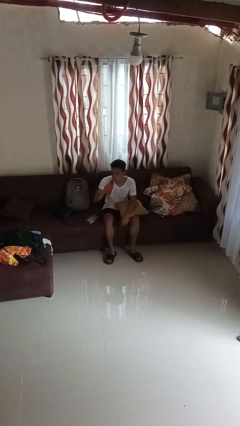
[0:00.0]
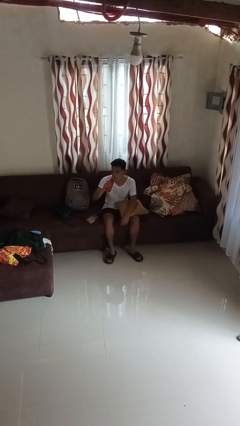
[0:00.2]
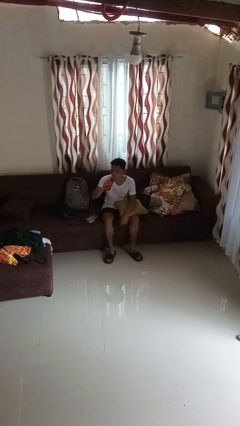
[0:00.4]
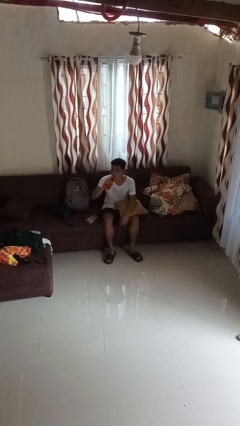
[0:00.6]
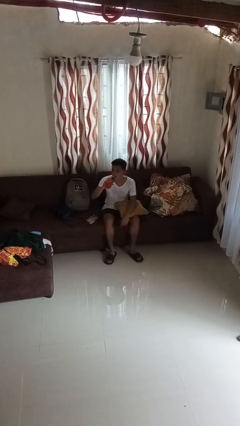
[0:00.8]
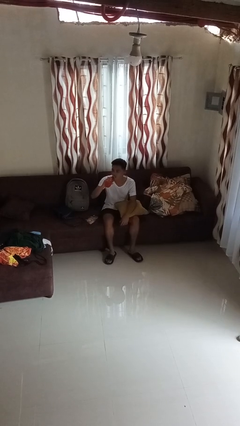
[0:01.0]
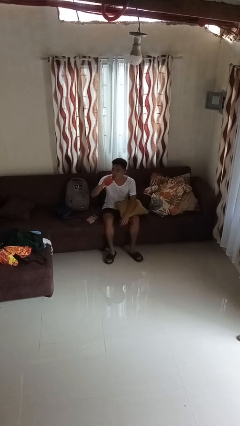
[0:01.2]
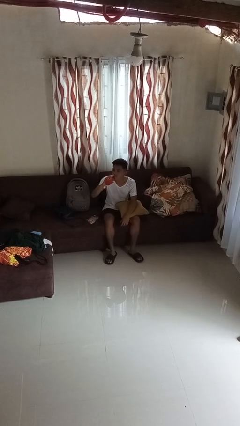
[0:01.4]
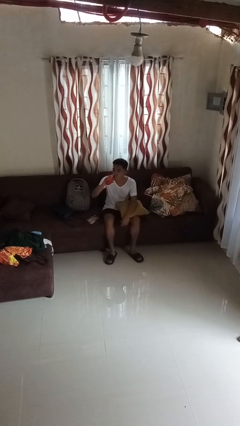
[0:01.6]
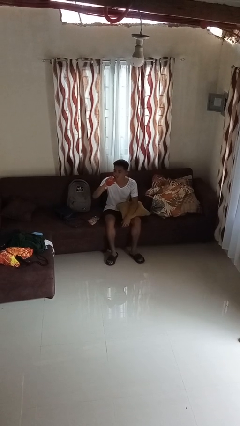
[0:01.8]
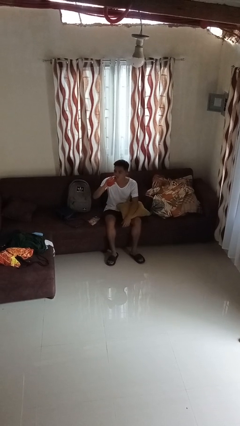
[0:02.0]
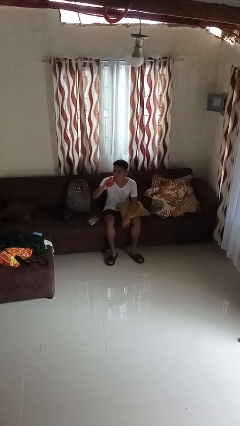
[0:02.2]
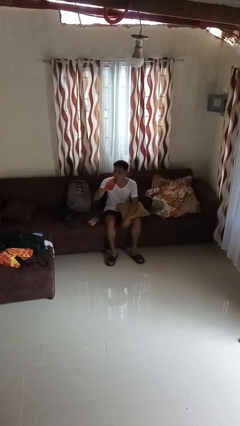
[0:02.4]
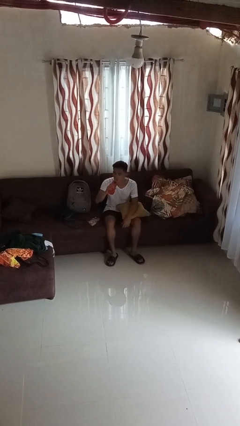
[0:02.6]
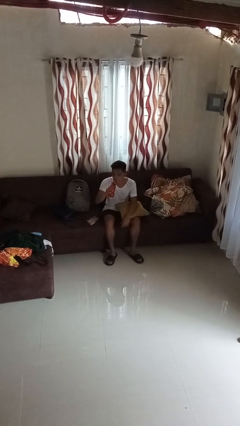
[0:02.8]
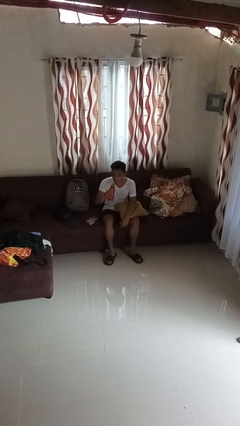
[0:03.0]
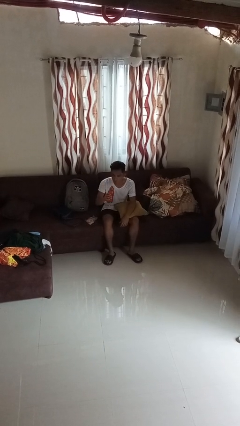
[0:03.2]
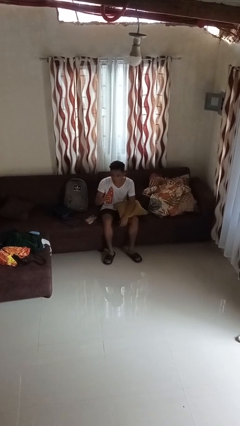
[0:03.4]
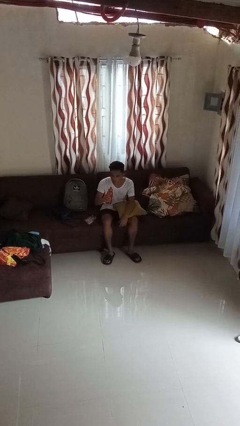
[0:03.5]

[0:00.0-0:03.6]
person drinks from bottle

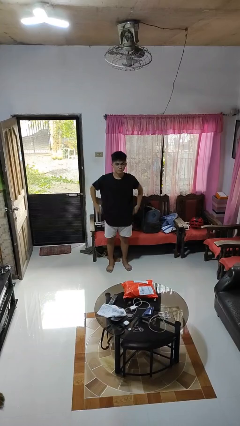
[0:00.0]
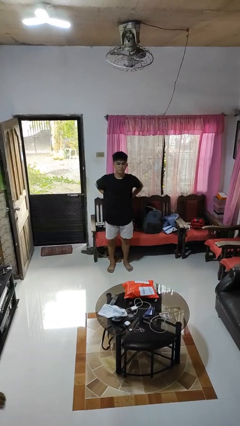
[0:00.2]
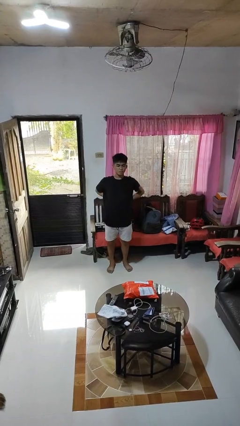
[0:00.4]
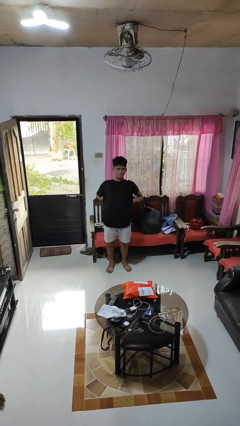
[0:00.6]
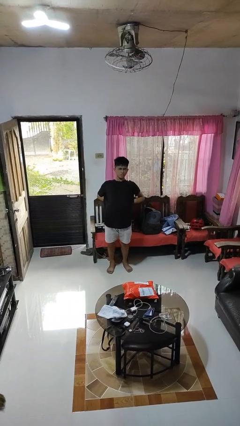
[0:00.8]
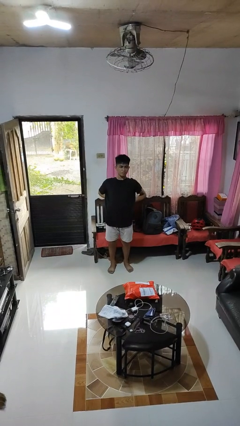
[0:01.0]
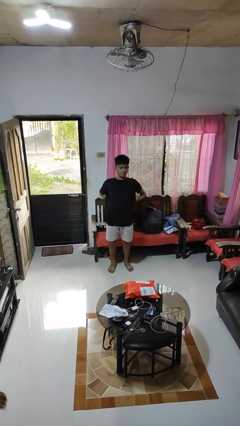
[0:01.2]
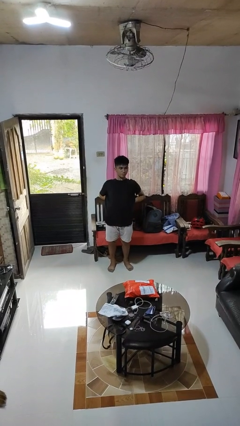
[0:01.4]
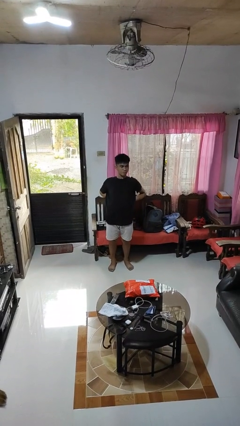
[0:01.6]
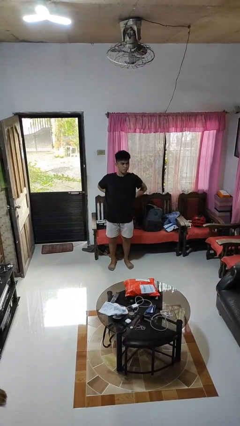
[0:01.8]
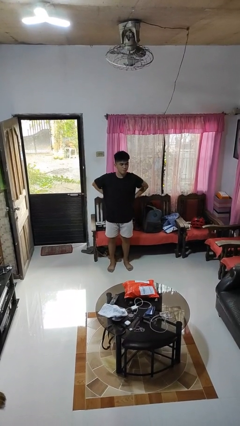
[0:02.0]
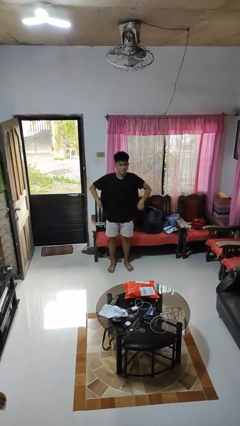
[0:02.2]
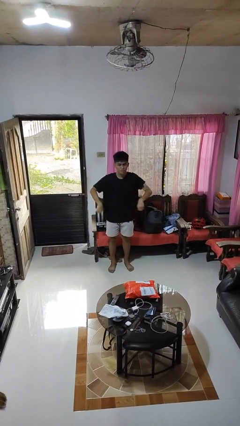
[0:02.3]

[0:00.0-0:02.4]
person stretches back

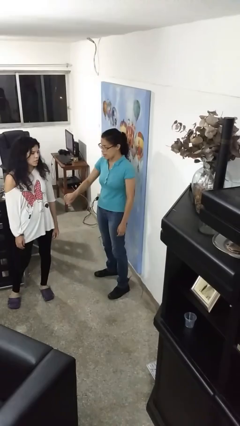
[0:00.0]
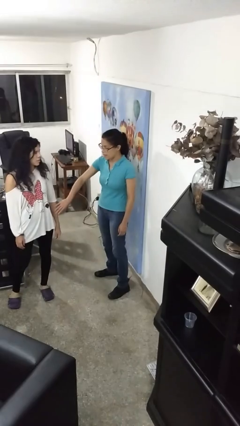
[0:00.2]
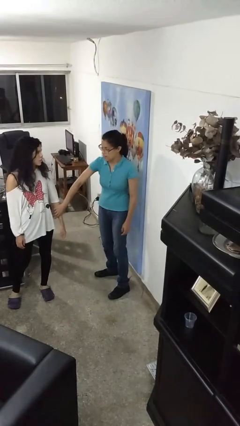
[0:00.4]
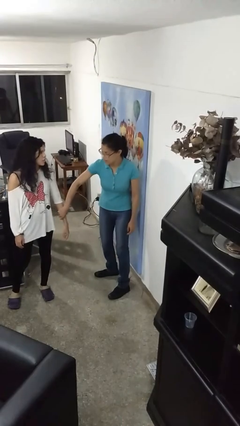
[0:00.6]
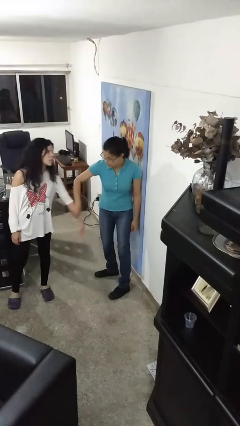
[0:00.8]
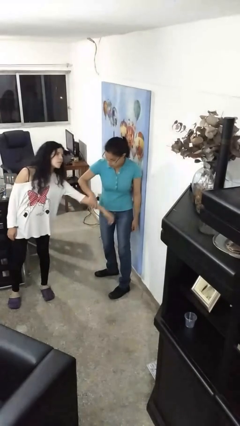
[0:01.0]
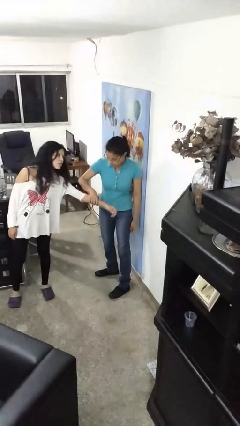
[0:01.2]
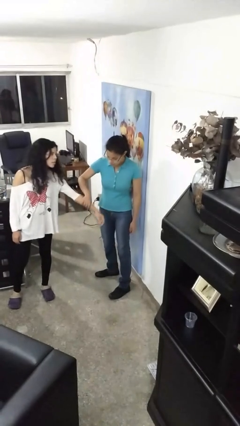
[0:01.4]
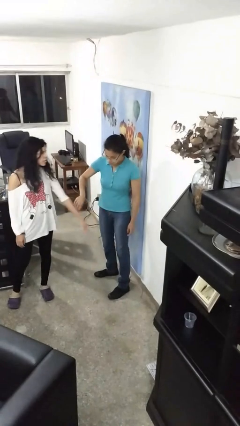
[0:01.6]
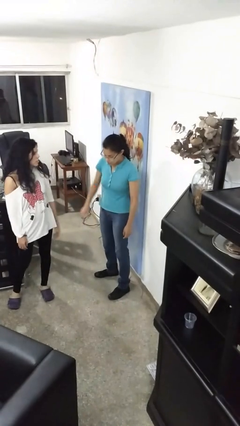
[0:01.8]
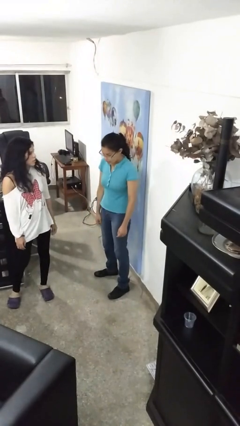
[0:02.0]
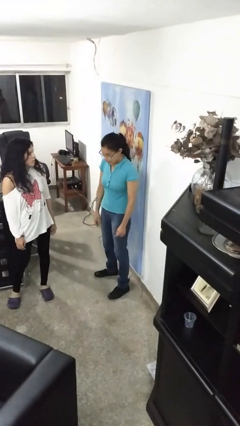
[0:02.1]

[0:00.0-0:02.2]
person grabs person by forearm

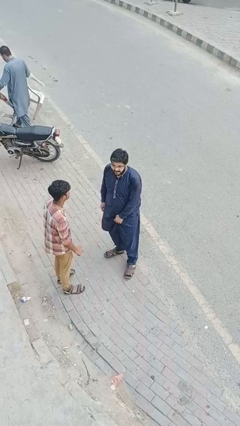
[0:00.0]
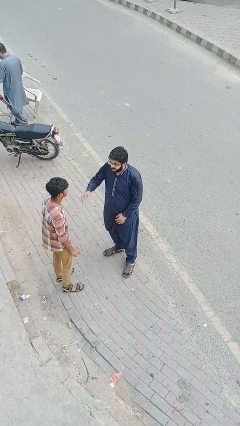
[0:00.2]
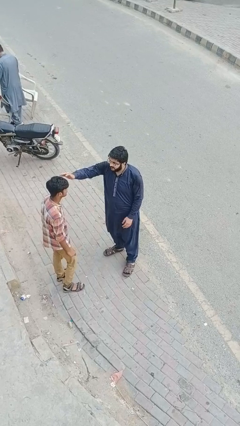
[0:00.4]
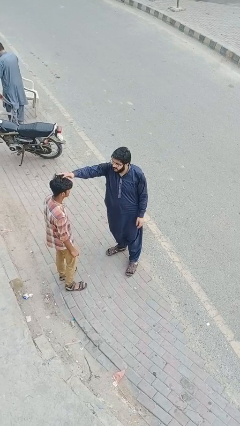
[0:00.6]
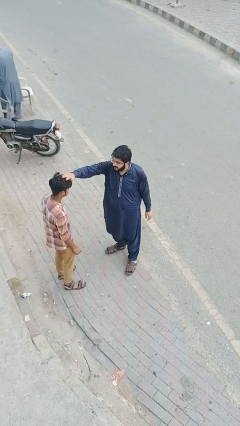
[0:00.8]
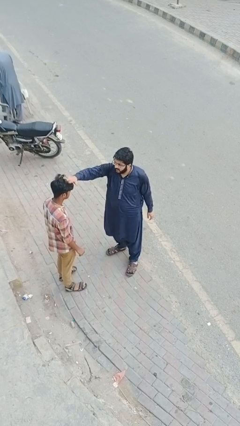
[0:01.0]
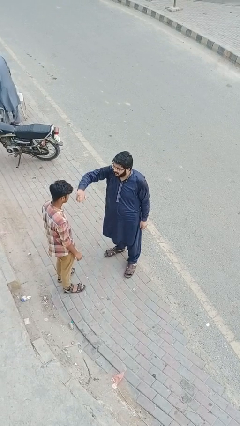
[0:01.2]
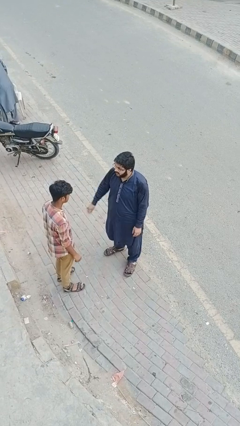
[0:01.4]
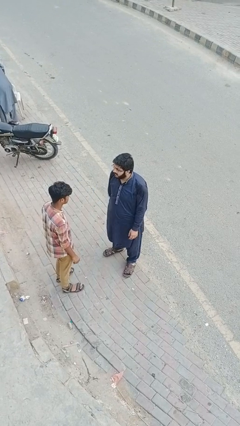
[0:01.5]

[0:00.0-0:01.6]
person grabs person by hair

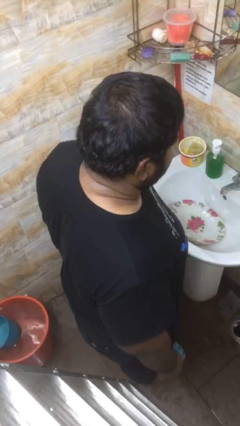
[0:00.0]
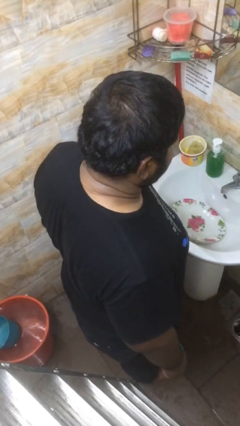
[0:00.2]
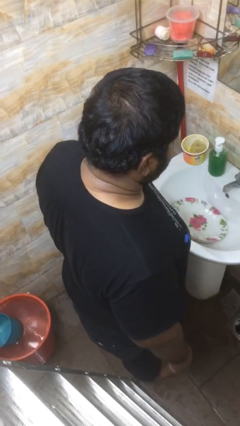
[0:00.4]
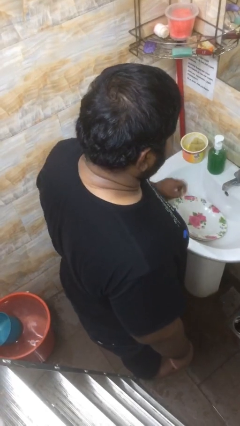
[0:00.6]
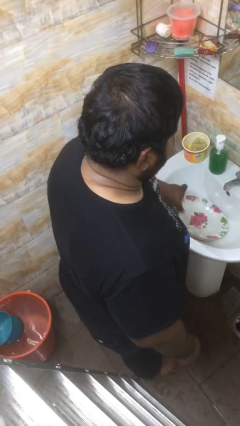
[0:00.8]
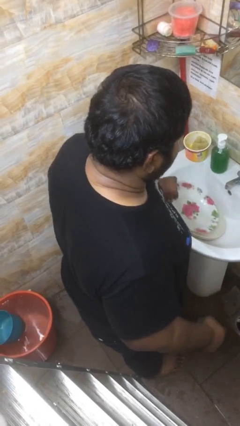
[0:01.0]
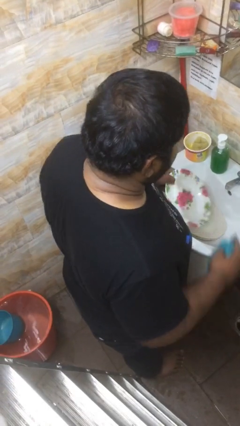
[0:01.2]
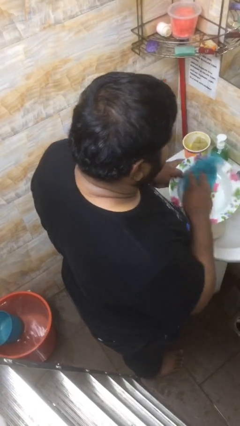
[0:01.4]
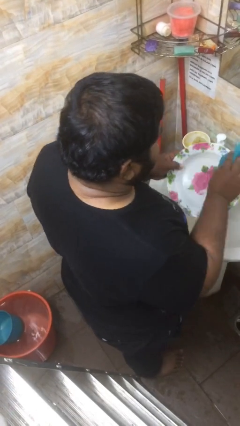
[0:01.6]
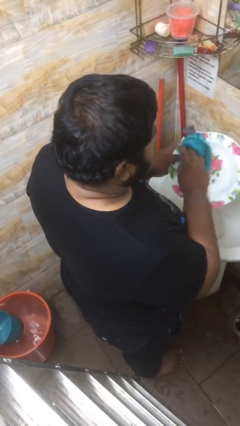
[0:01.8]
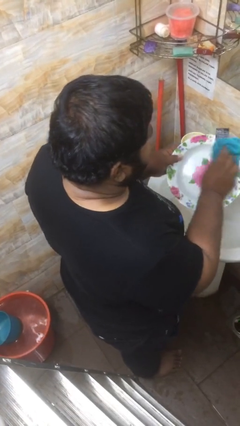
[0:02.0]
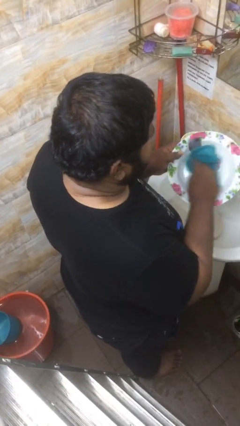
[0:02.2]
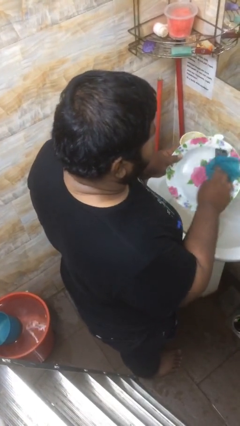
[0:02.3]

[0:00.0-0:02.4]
person dries dish

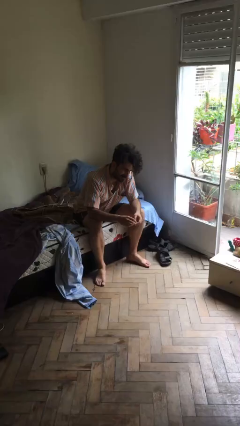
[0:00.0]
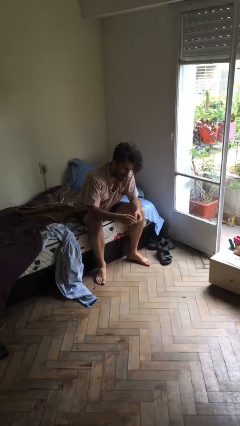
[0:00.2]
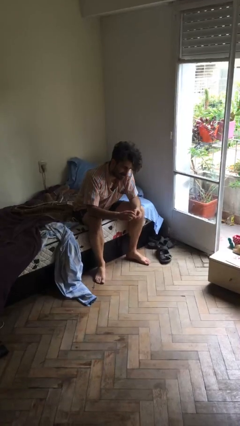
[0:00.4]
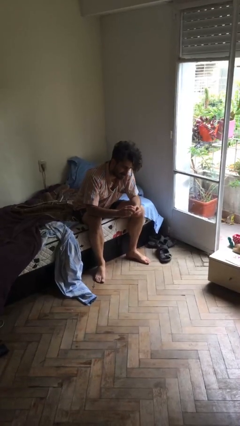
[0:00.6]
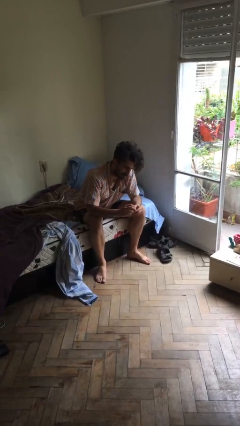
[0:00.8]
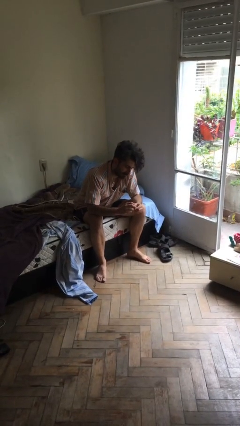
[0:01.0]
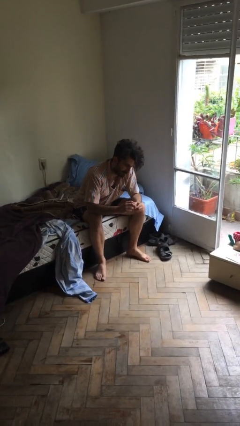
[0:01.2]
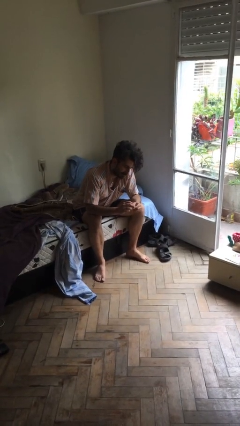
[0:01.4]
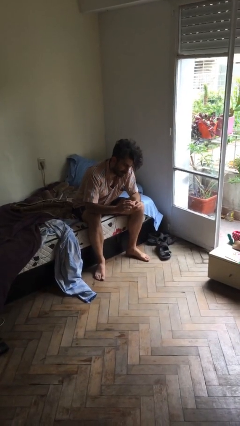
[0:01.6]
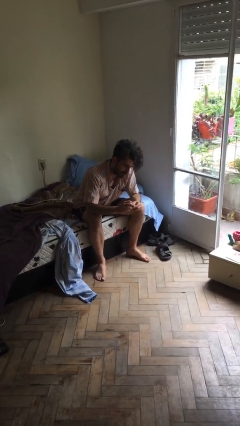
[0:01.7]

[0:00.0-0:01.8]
person files fingernails

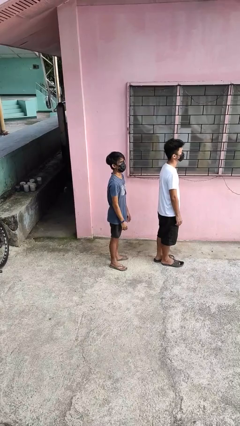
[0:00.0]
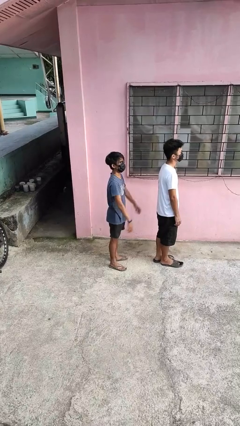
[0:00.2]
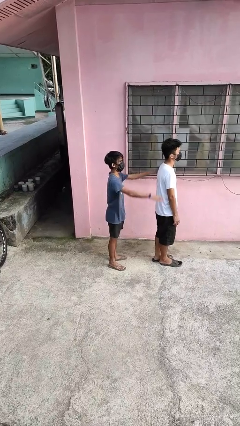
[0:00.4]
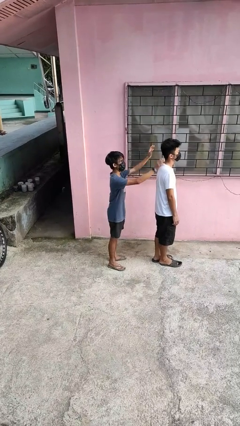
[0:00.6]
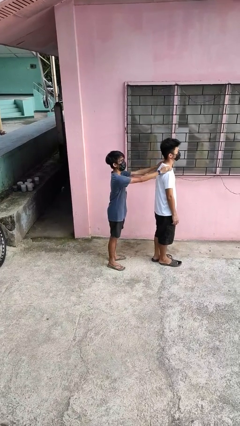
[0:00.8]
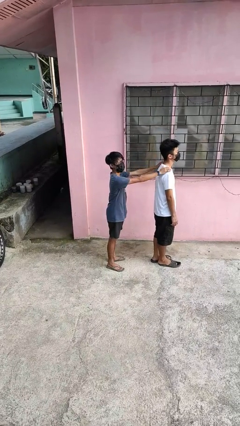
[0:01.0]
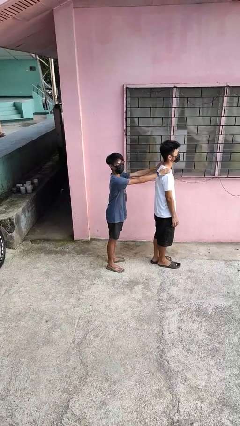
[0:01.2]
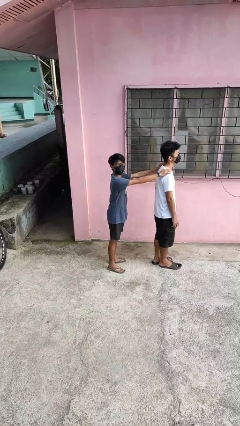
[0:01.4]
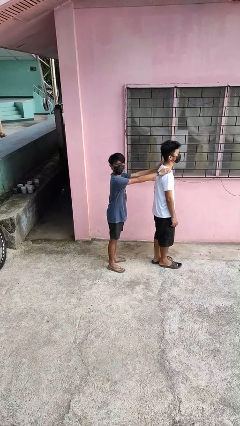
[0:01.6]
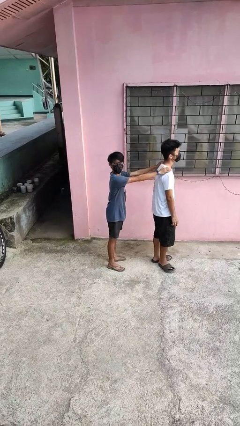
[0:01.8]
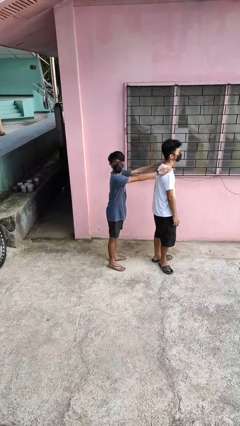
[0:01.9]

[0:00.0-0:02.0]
person grabs person by shoulder

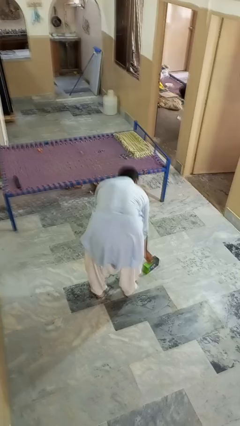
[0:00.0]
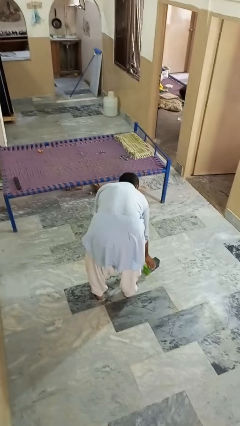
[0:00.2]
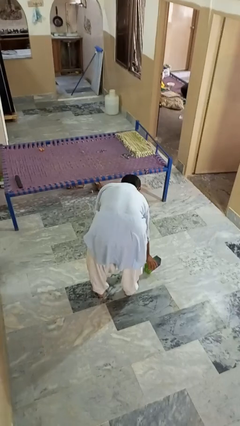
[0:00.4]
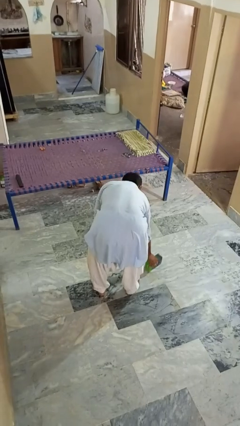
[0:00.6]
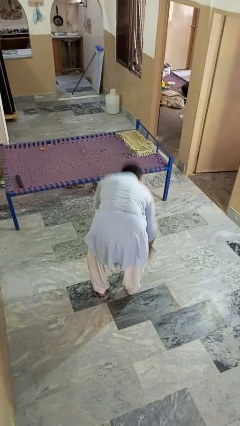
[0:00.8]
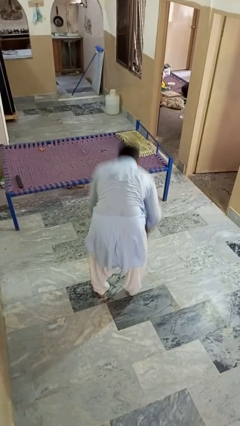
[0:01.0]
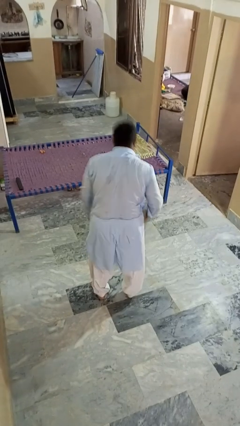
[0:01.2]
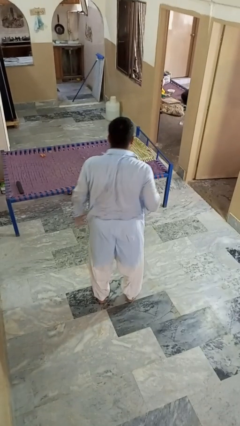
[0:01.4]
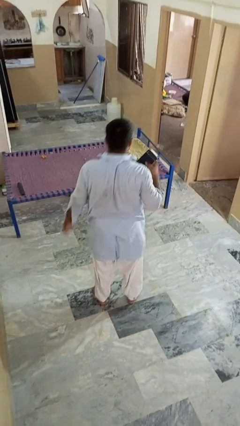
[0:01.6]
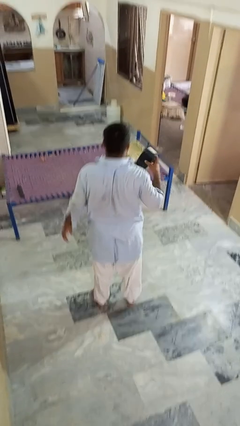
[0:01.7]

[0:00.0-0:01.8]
person picks up object from floor
